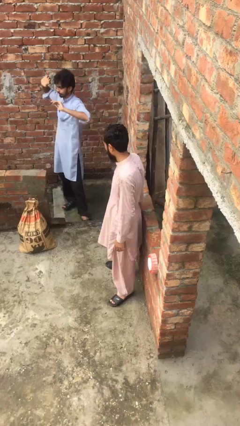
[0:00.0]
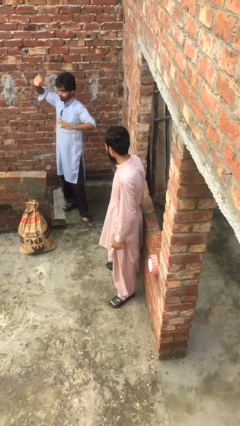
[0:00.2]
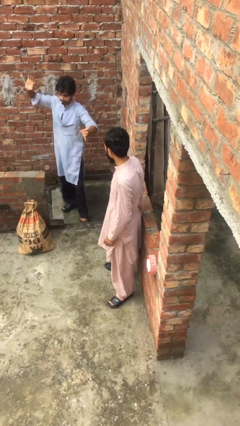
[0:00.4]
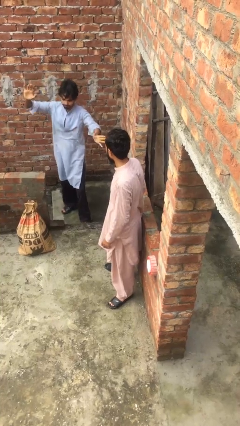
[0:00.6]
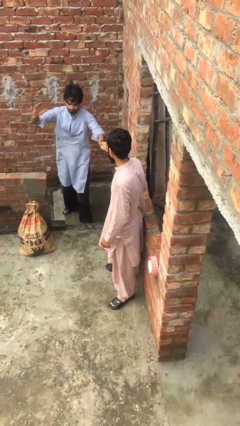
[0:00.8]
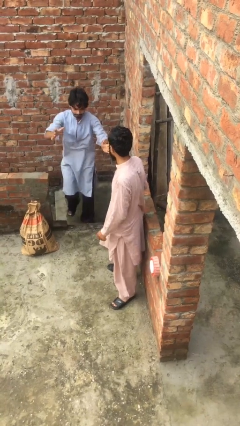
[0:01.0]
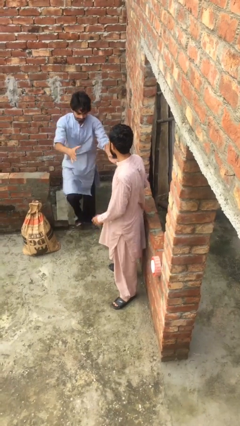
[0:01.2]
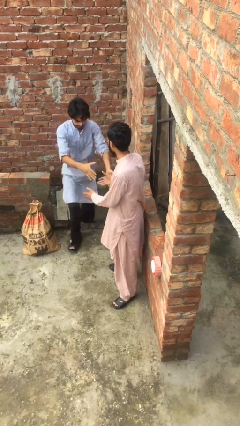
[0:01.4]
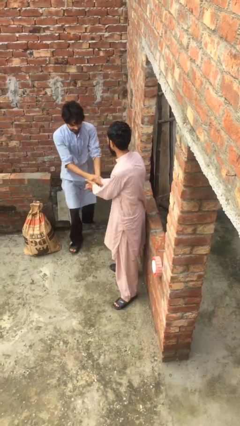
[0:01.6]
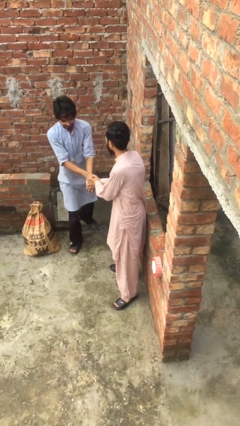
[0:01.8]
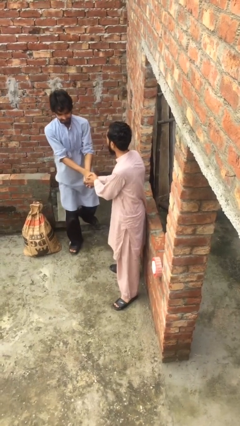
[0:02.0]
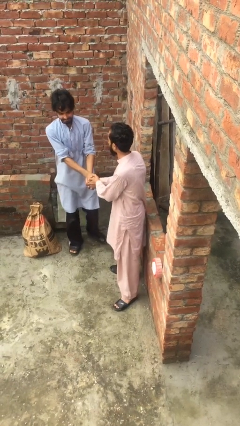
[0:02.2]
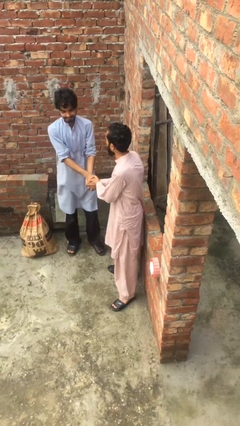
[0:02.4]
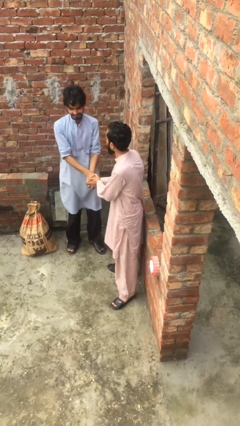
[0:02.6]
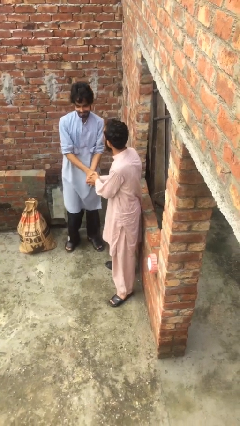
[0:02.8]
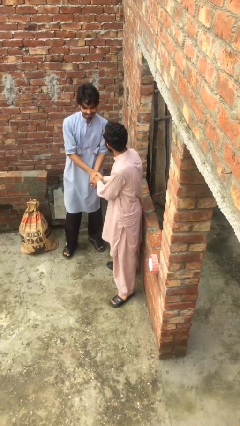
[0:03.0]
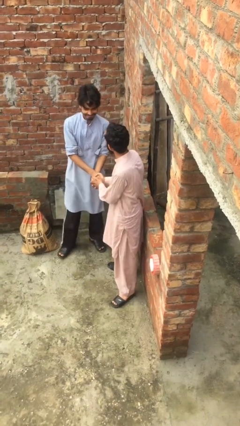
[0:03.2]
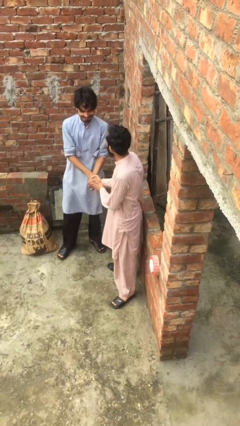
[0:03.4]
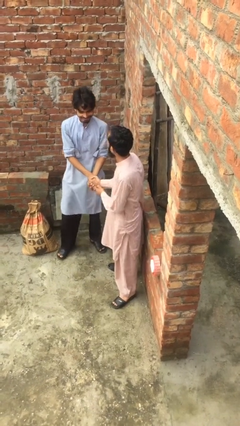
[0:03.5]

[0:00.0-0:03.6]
person shakes hand

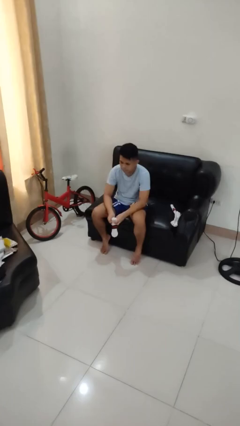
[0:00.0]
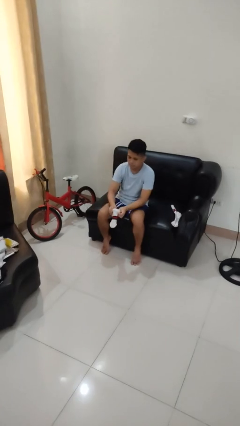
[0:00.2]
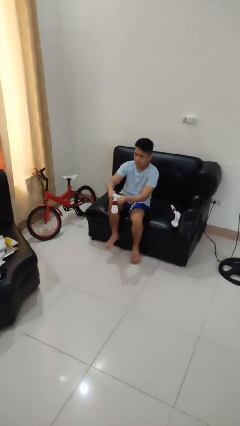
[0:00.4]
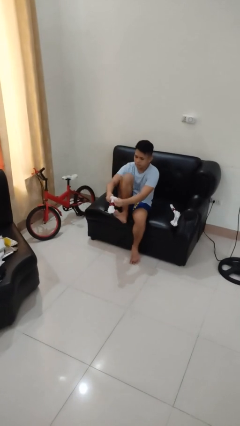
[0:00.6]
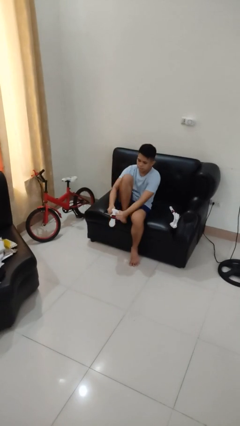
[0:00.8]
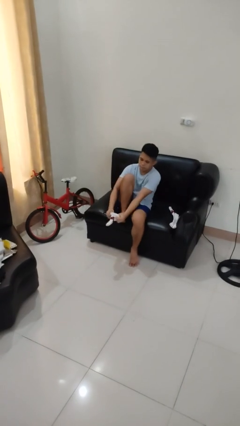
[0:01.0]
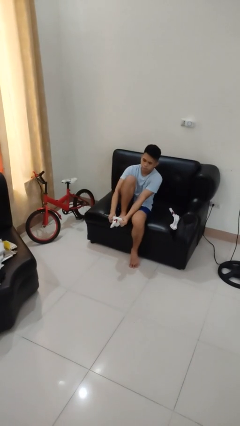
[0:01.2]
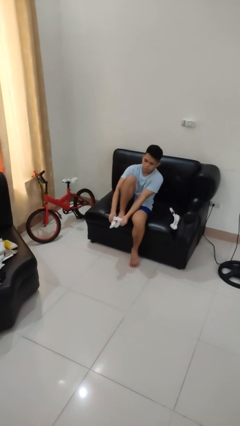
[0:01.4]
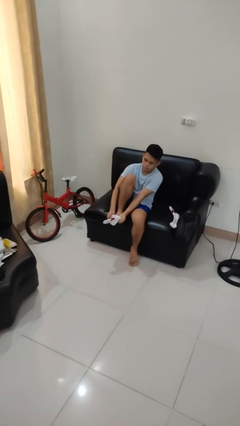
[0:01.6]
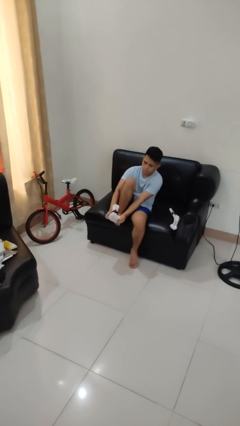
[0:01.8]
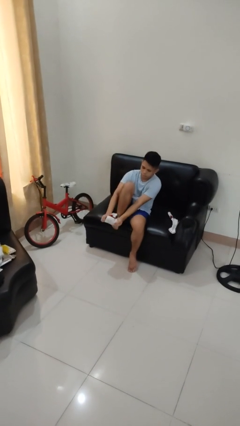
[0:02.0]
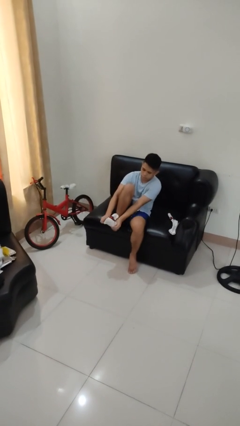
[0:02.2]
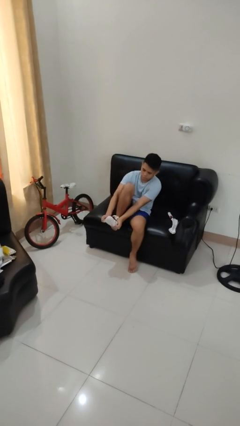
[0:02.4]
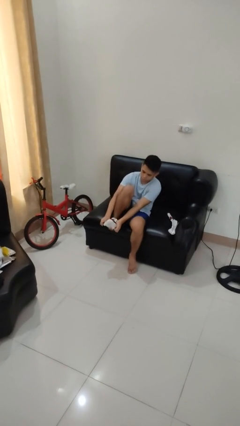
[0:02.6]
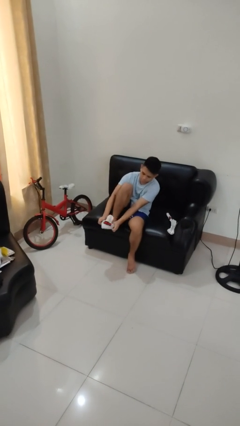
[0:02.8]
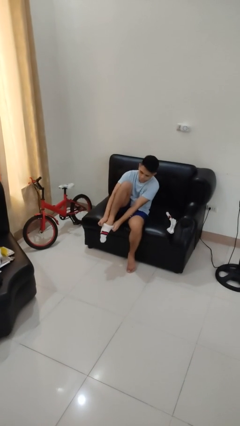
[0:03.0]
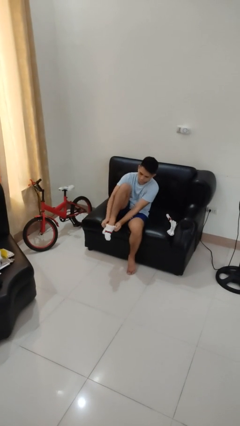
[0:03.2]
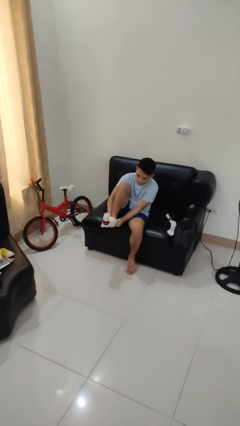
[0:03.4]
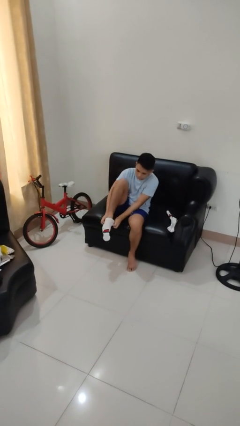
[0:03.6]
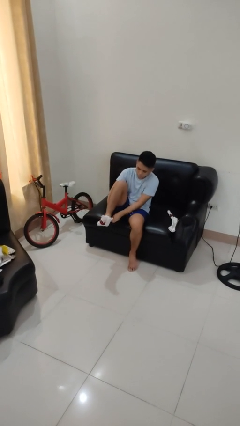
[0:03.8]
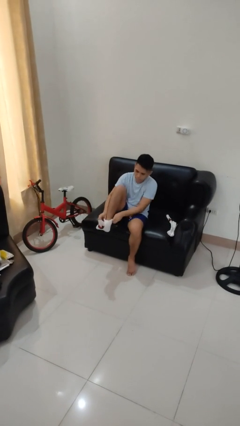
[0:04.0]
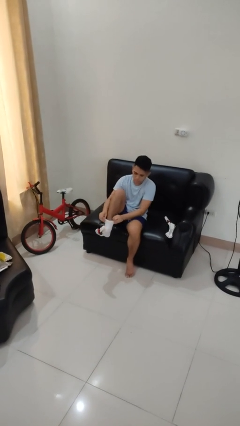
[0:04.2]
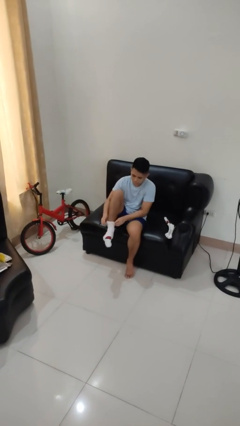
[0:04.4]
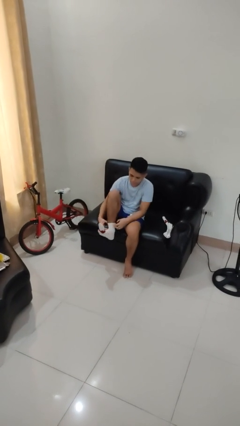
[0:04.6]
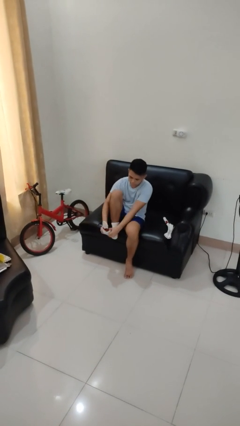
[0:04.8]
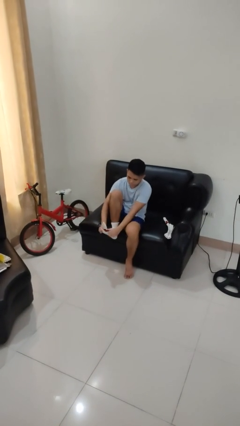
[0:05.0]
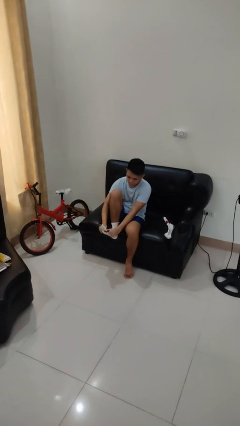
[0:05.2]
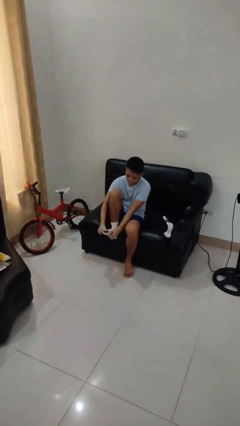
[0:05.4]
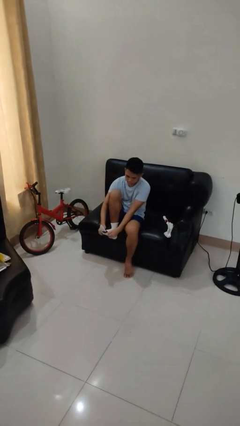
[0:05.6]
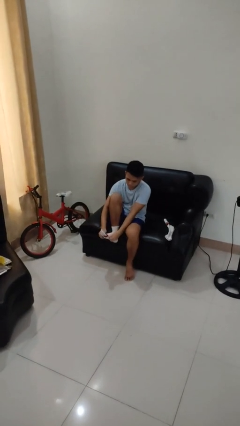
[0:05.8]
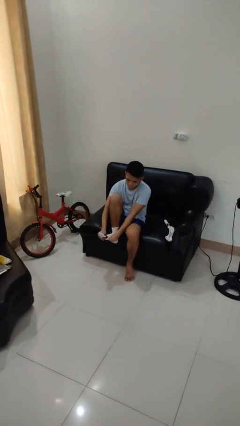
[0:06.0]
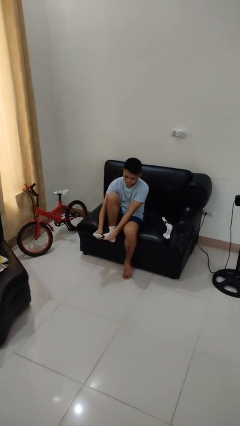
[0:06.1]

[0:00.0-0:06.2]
person puts on socks

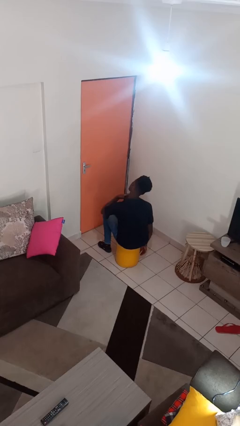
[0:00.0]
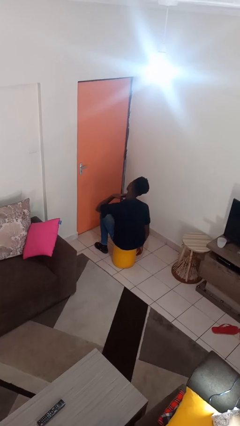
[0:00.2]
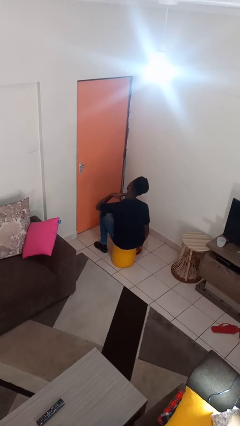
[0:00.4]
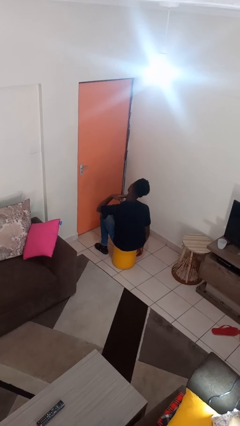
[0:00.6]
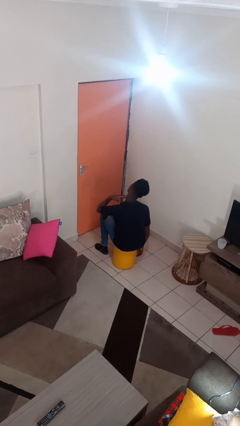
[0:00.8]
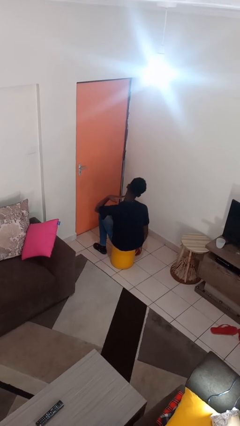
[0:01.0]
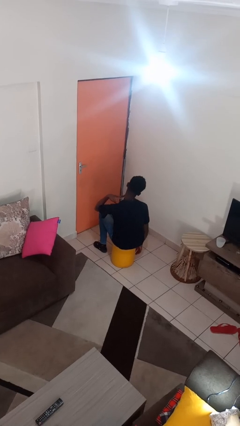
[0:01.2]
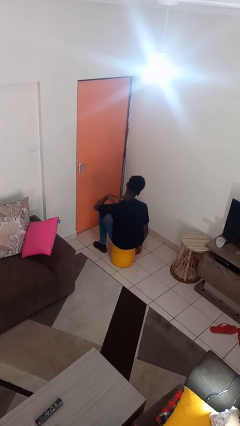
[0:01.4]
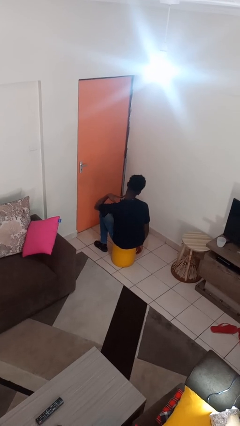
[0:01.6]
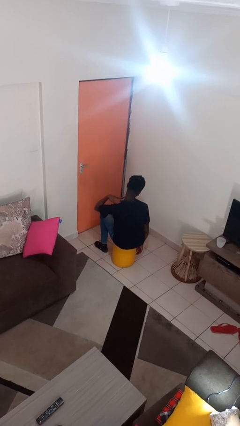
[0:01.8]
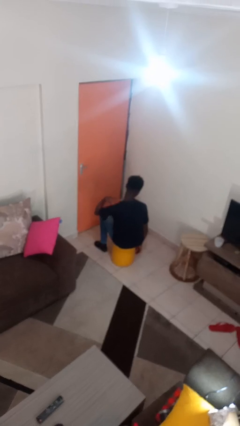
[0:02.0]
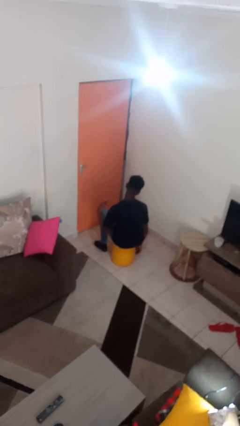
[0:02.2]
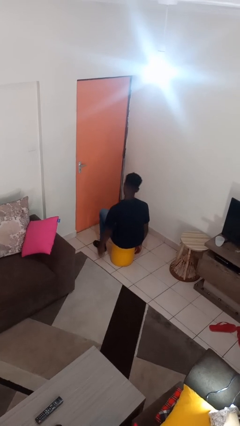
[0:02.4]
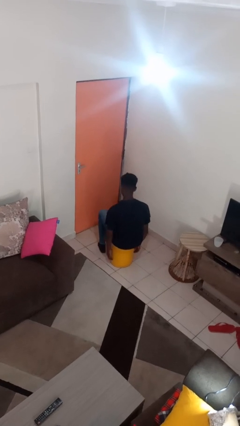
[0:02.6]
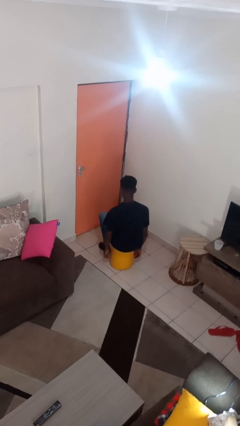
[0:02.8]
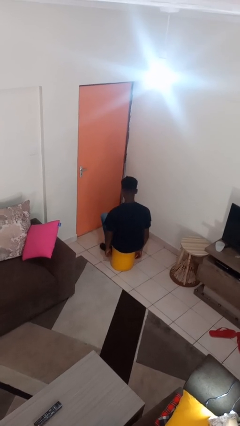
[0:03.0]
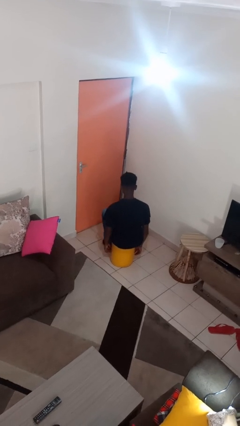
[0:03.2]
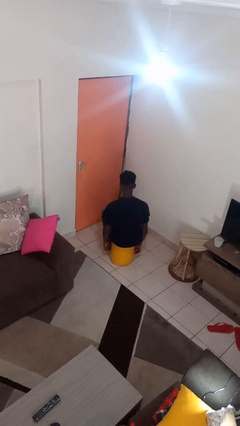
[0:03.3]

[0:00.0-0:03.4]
person gestures cut

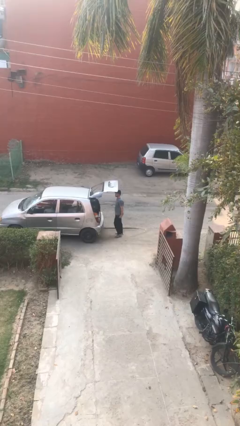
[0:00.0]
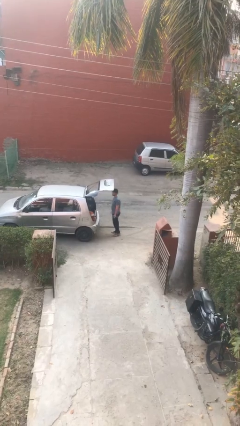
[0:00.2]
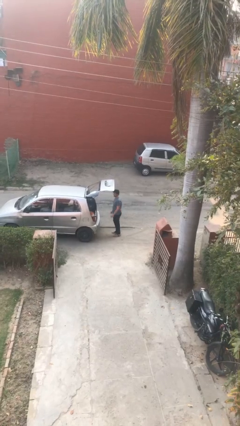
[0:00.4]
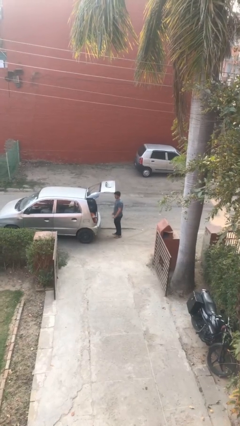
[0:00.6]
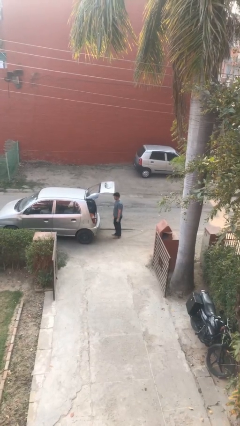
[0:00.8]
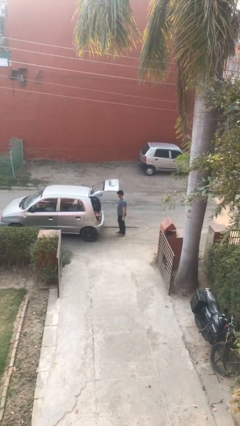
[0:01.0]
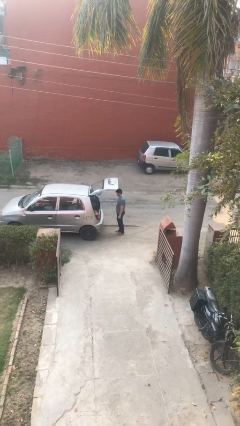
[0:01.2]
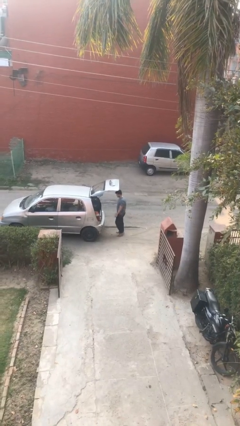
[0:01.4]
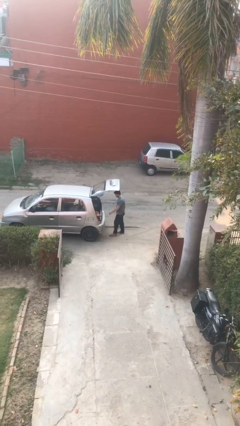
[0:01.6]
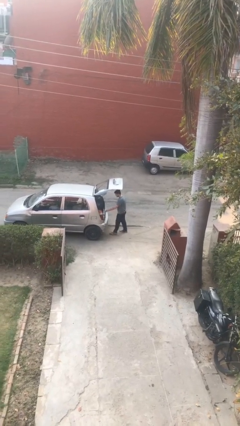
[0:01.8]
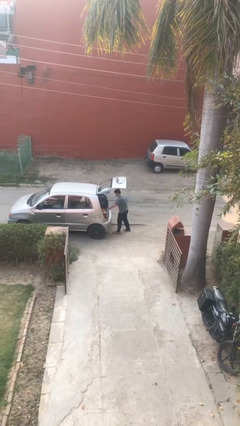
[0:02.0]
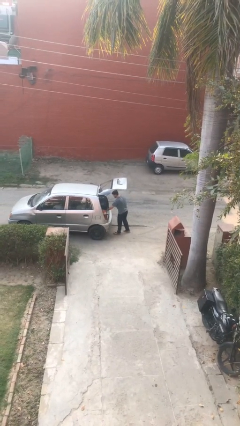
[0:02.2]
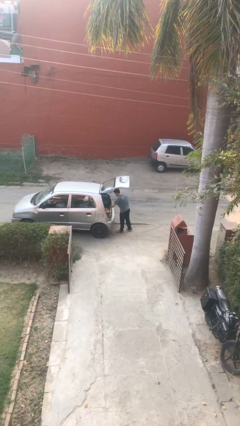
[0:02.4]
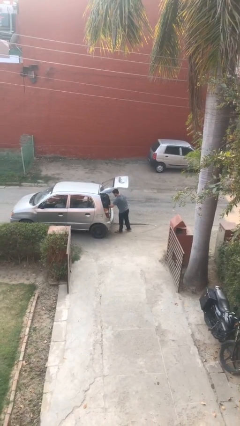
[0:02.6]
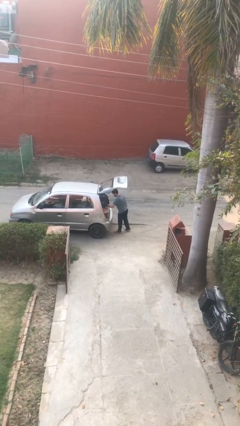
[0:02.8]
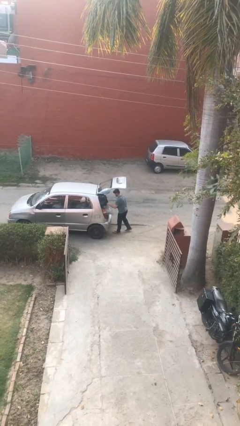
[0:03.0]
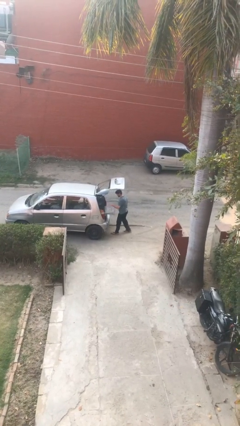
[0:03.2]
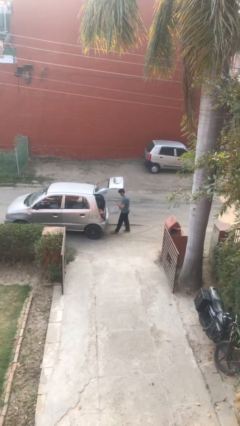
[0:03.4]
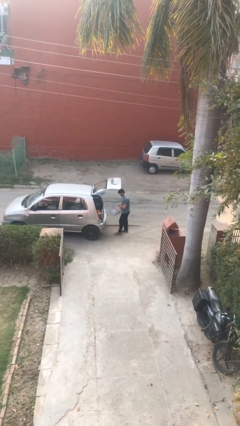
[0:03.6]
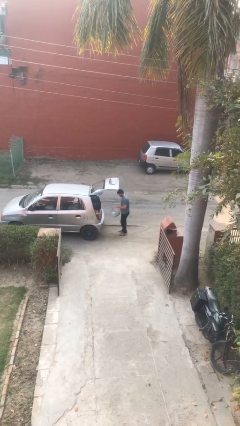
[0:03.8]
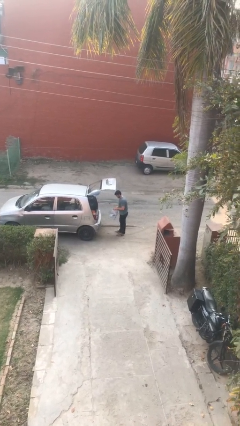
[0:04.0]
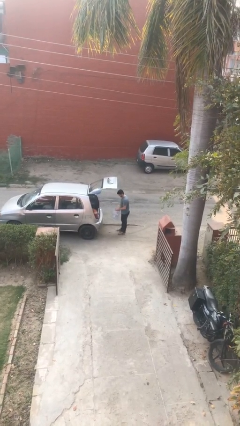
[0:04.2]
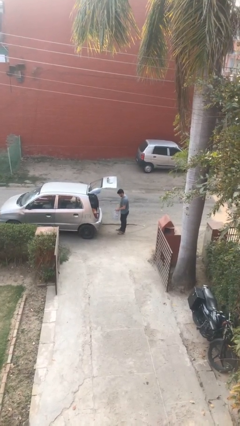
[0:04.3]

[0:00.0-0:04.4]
person unloads car

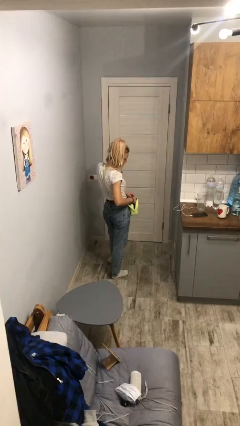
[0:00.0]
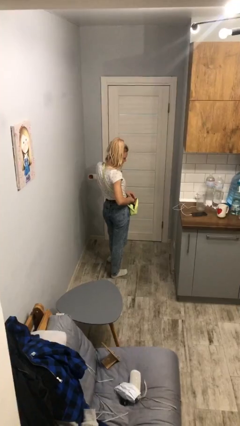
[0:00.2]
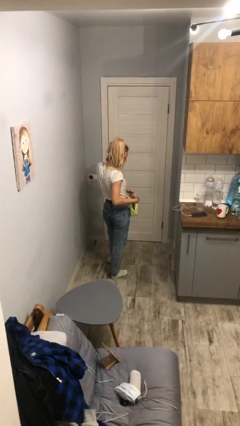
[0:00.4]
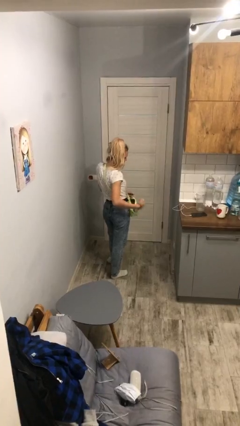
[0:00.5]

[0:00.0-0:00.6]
person puts object into purse
